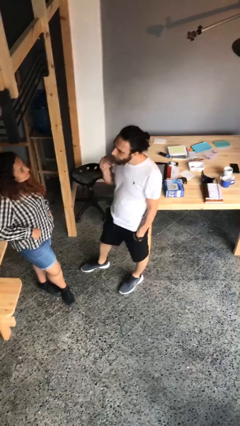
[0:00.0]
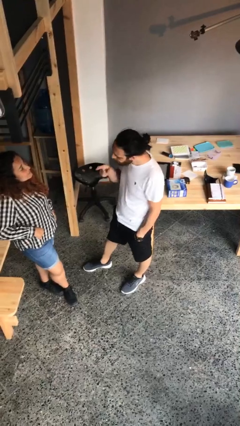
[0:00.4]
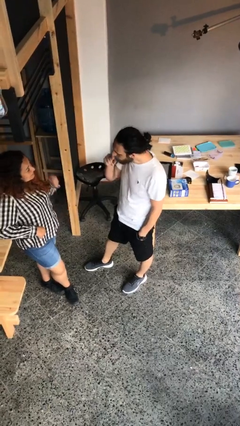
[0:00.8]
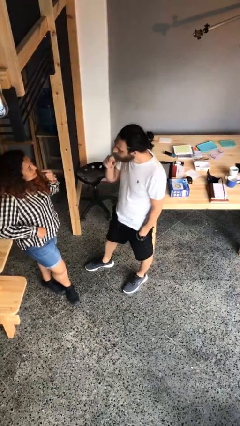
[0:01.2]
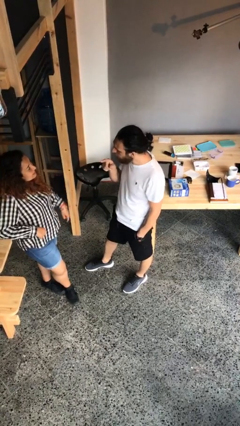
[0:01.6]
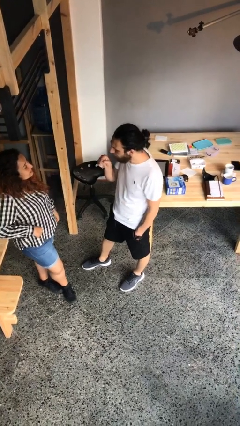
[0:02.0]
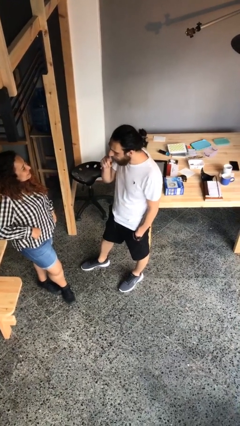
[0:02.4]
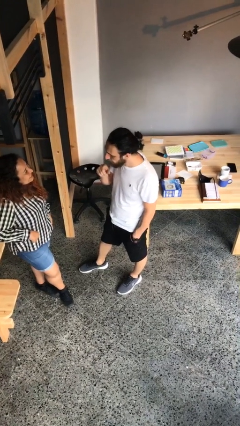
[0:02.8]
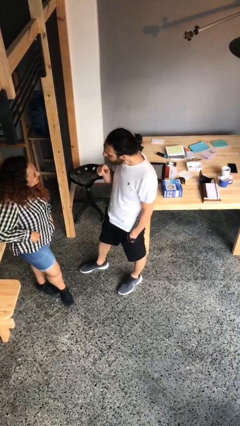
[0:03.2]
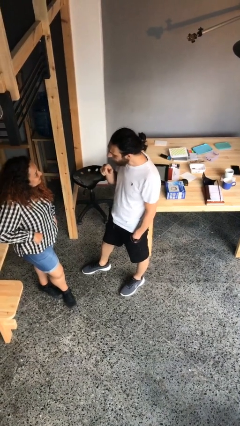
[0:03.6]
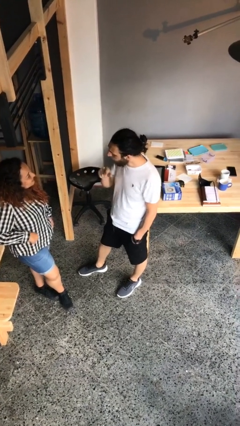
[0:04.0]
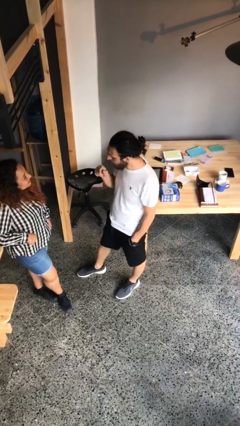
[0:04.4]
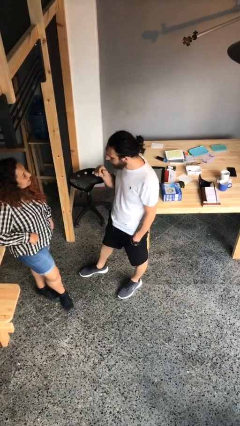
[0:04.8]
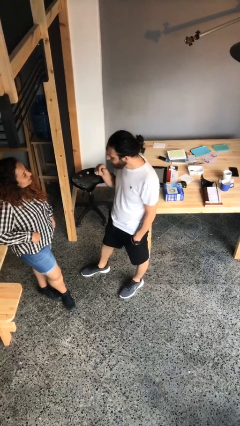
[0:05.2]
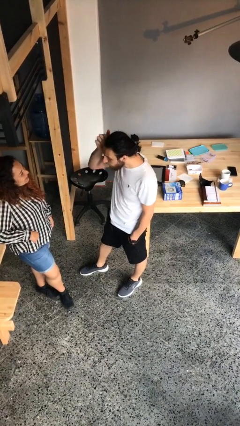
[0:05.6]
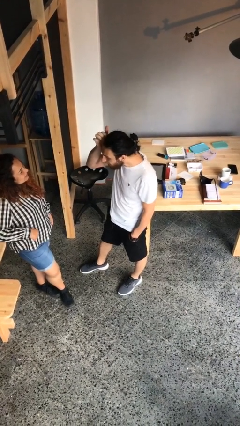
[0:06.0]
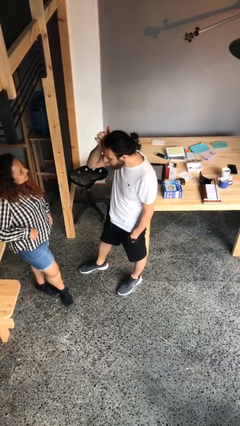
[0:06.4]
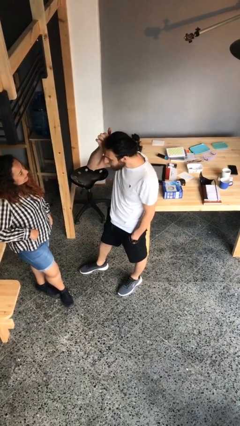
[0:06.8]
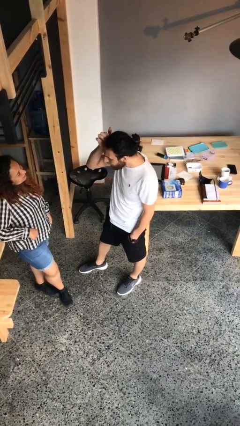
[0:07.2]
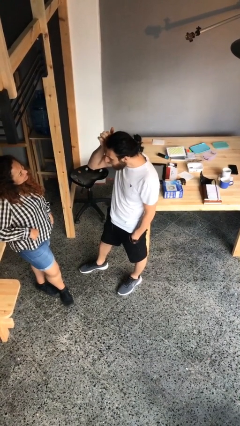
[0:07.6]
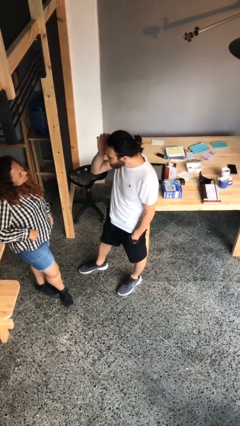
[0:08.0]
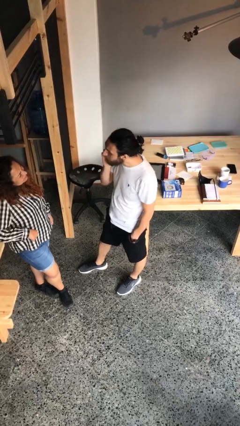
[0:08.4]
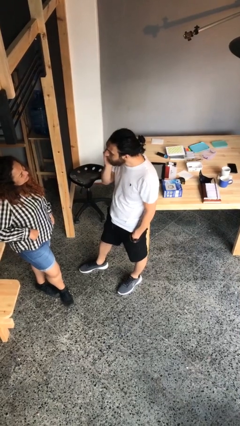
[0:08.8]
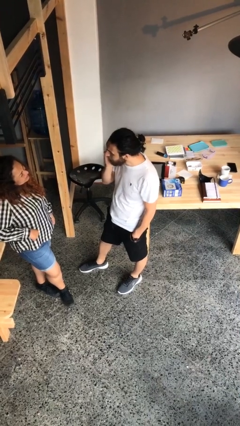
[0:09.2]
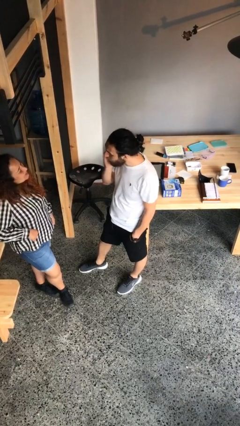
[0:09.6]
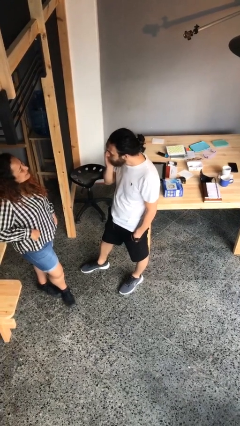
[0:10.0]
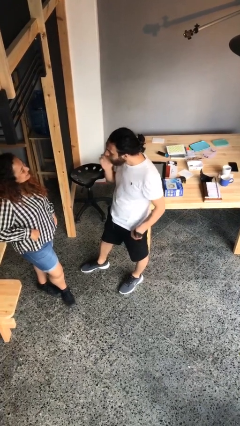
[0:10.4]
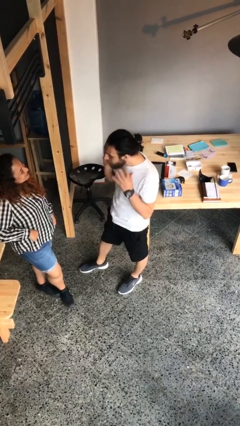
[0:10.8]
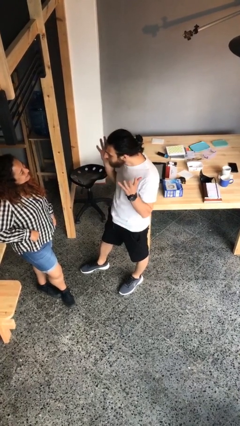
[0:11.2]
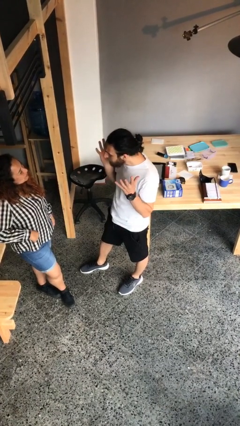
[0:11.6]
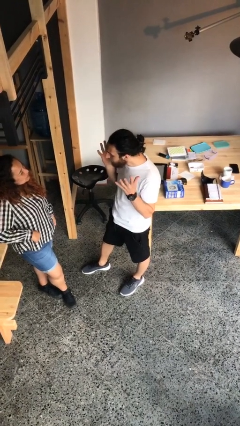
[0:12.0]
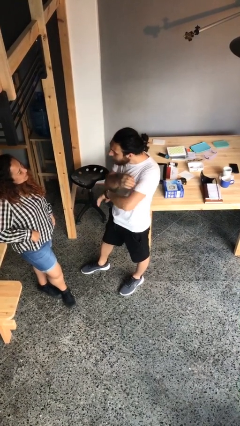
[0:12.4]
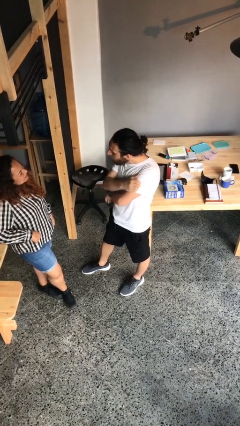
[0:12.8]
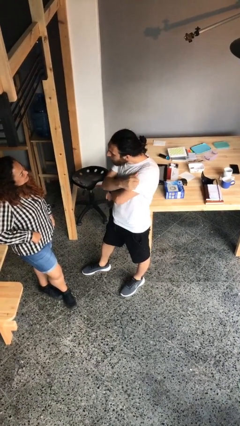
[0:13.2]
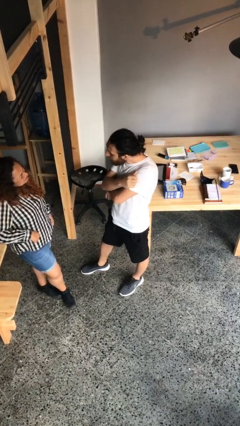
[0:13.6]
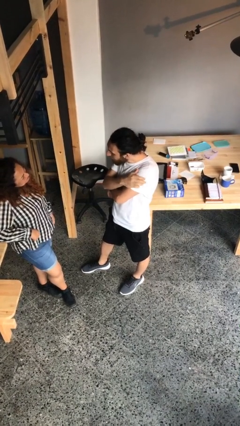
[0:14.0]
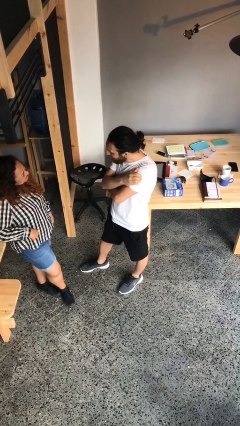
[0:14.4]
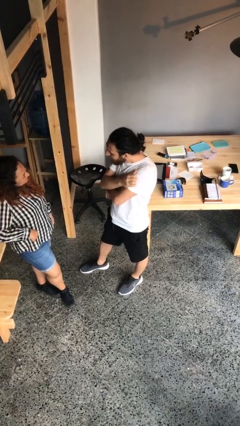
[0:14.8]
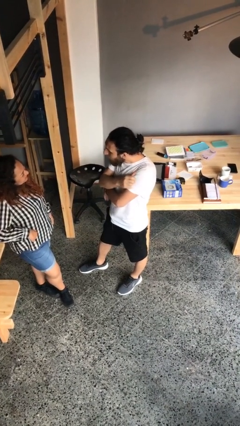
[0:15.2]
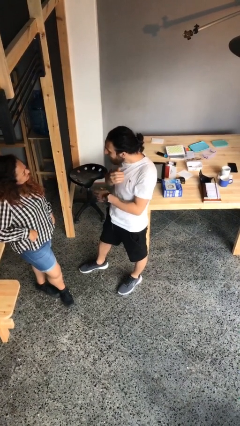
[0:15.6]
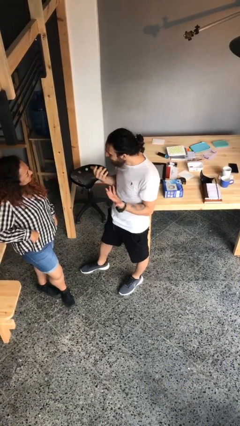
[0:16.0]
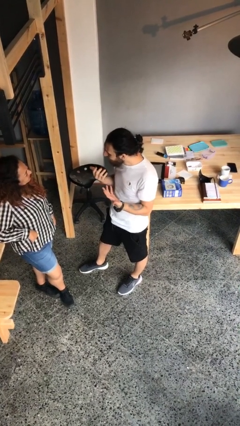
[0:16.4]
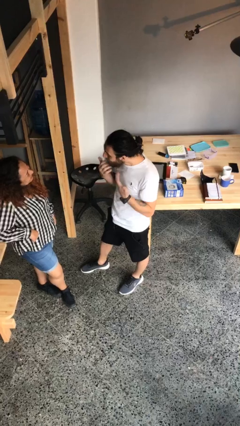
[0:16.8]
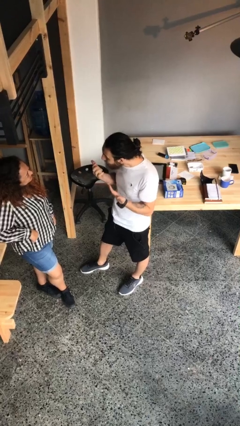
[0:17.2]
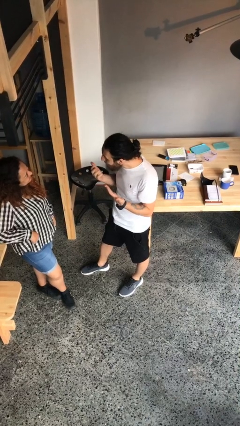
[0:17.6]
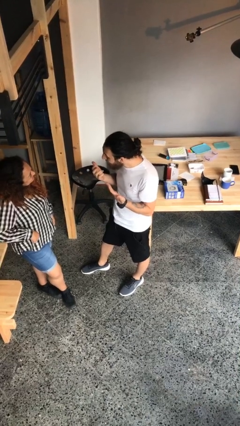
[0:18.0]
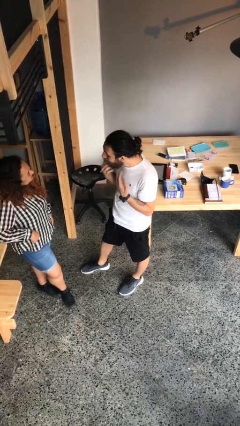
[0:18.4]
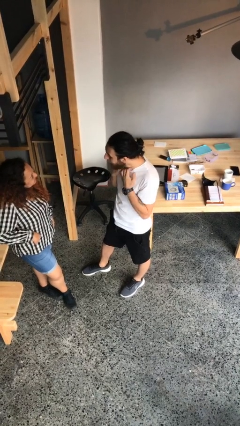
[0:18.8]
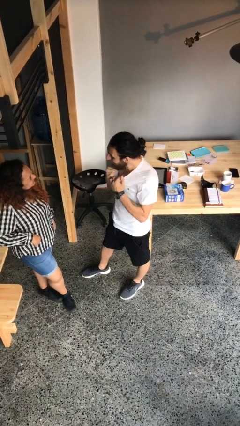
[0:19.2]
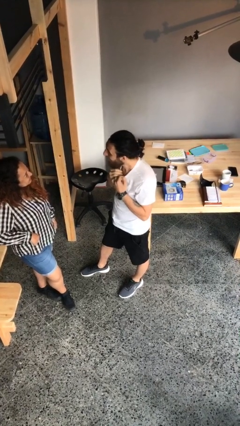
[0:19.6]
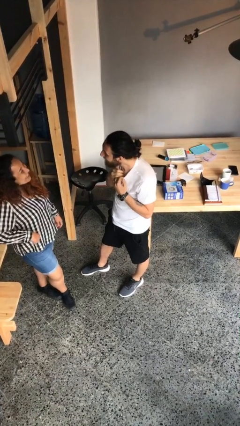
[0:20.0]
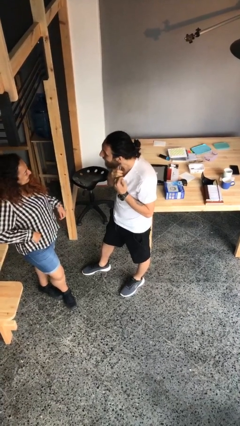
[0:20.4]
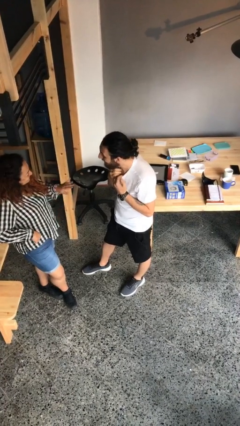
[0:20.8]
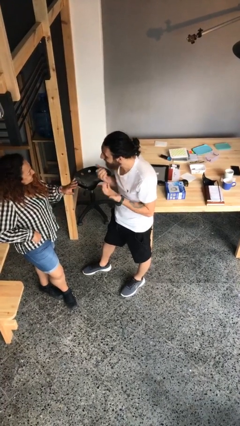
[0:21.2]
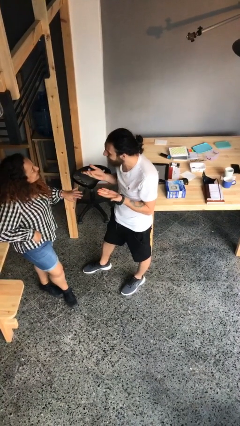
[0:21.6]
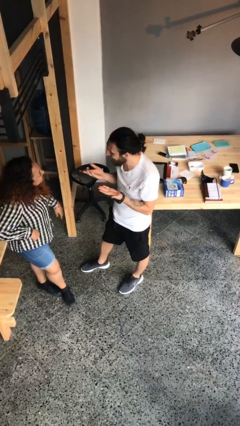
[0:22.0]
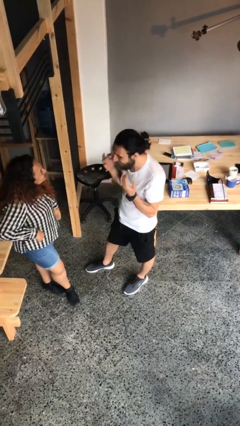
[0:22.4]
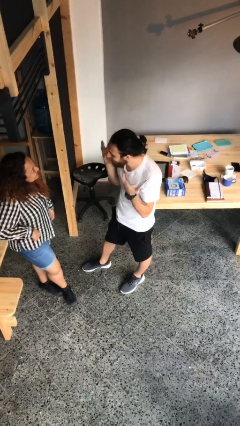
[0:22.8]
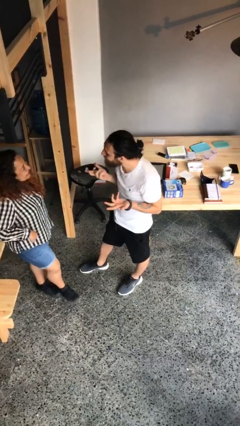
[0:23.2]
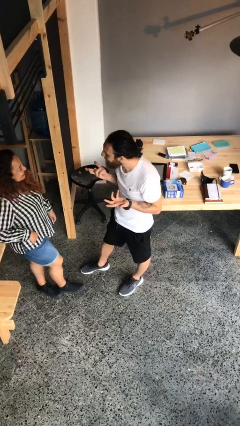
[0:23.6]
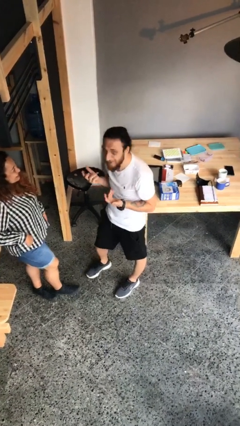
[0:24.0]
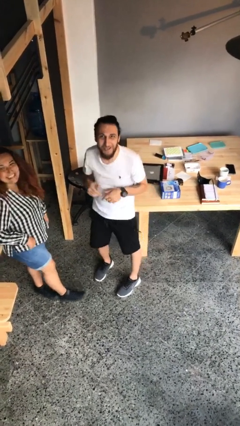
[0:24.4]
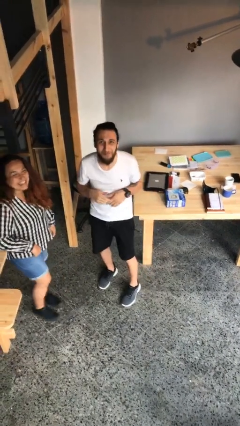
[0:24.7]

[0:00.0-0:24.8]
person talks to person

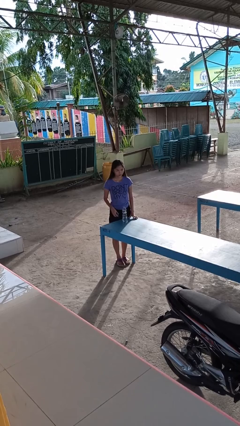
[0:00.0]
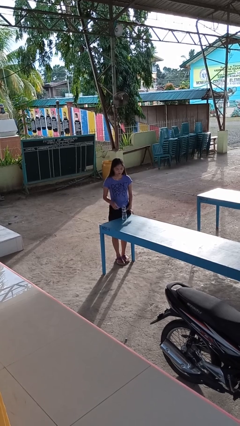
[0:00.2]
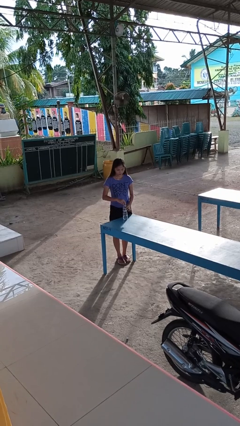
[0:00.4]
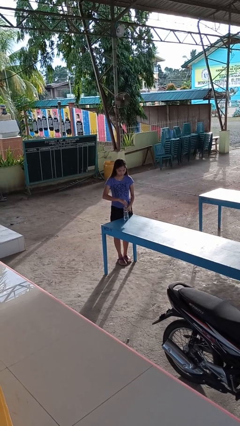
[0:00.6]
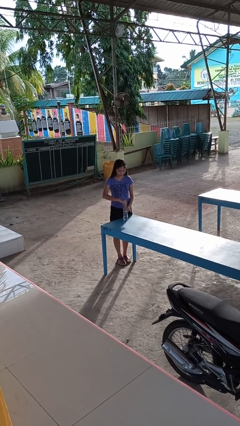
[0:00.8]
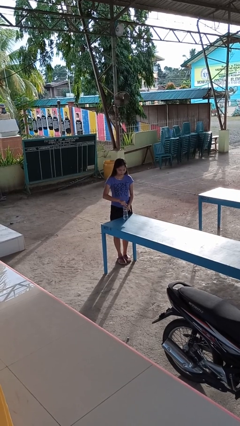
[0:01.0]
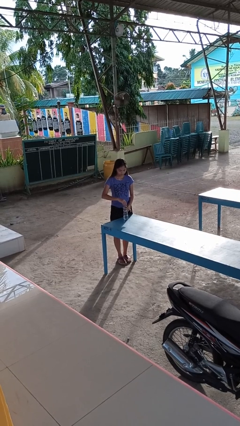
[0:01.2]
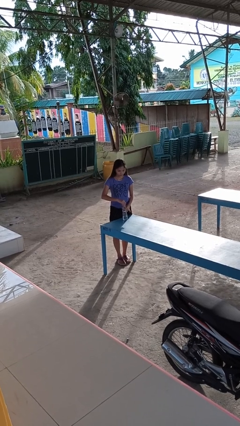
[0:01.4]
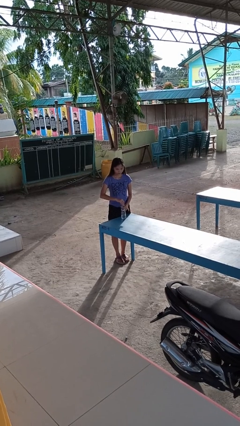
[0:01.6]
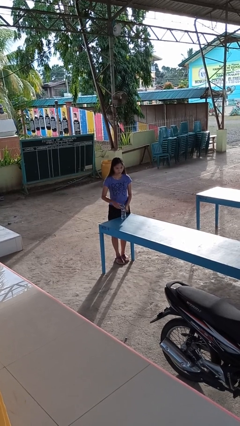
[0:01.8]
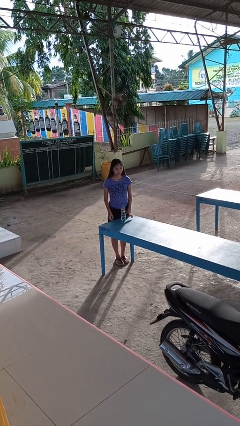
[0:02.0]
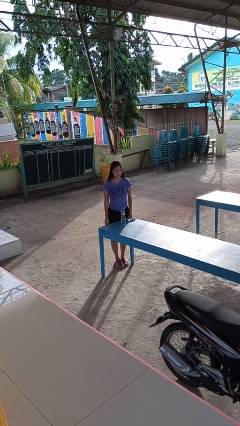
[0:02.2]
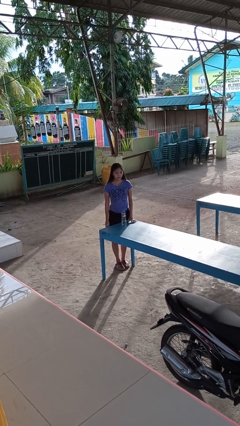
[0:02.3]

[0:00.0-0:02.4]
person screws lid to bottle

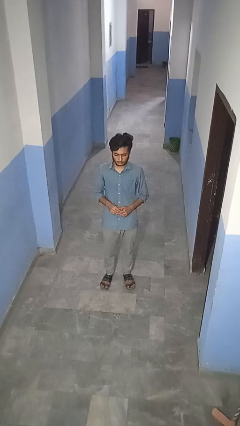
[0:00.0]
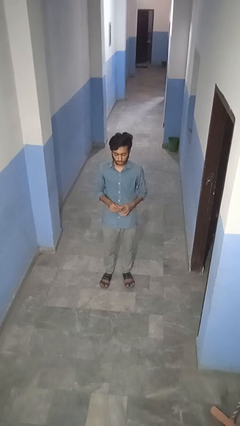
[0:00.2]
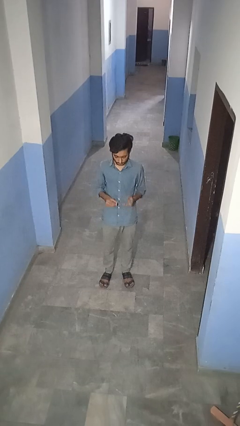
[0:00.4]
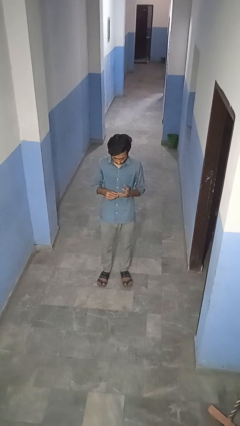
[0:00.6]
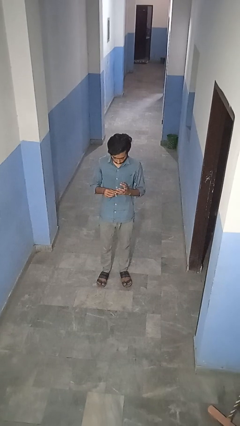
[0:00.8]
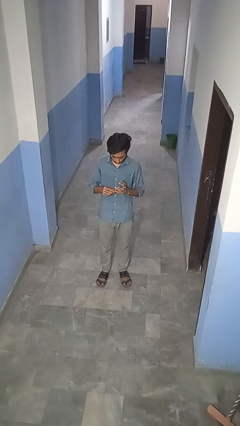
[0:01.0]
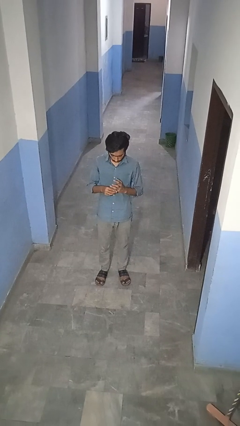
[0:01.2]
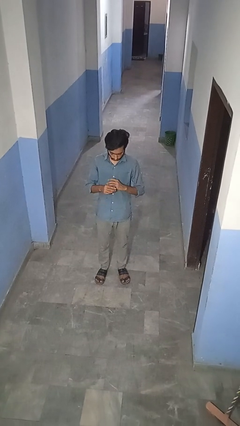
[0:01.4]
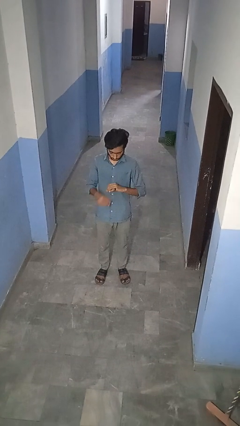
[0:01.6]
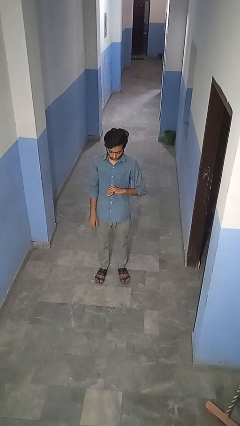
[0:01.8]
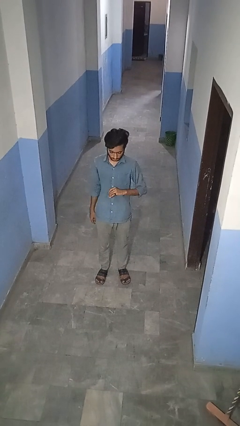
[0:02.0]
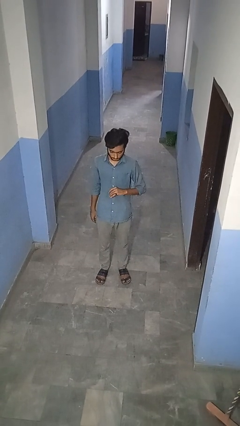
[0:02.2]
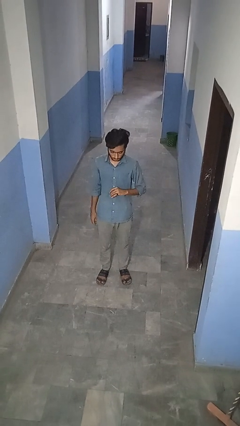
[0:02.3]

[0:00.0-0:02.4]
person puts on ring
